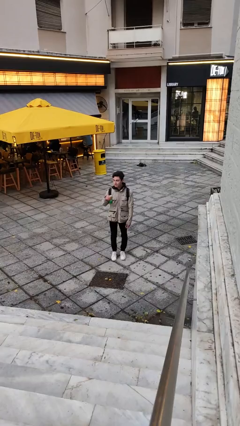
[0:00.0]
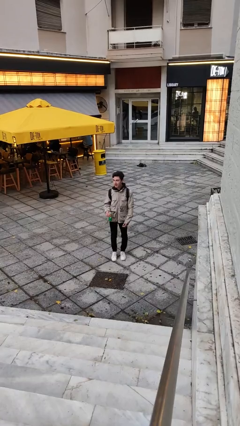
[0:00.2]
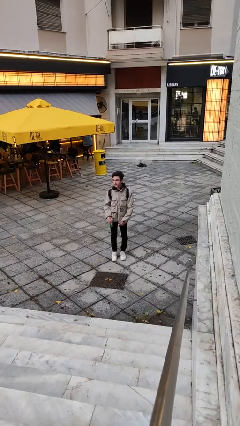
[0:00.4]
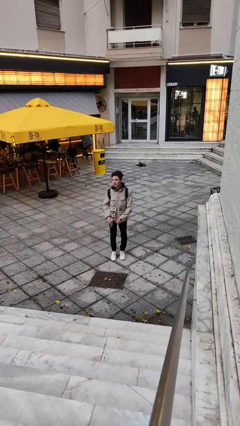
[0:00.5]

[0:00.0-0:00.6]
person drinks from beverage can

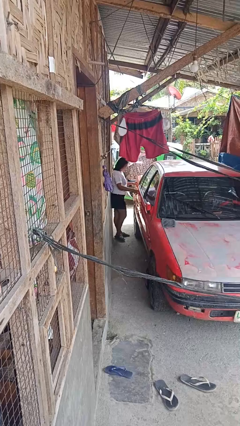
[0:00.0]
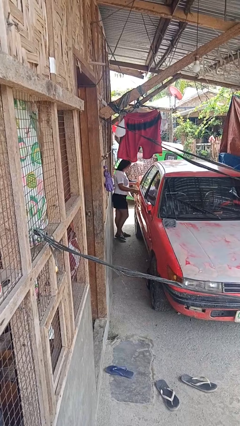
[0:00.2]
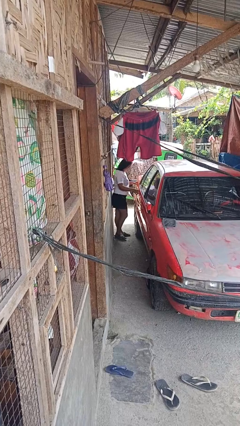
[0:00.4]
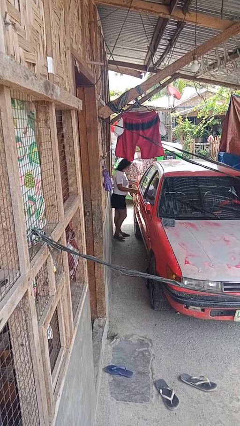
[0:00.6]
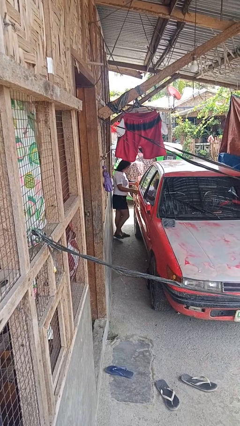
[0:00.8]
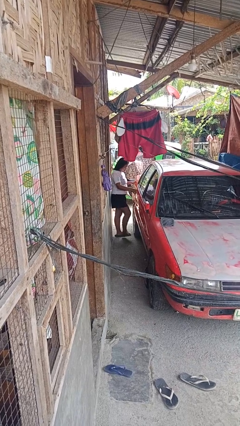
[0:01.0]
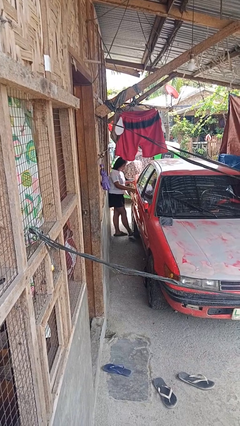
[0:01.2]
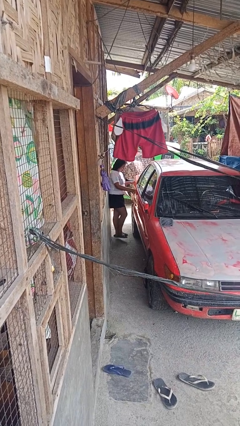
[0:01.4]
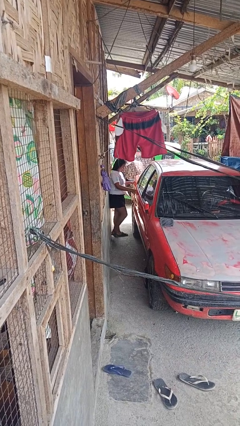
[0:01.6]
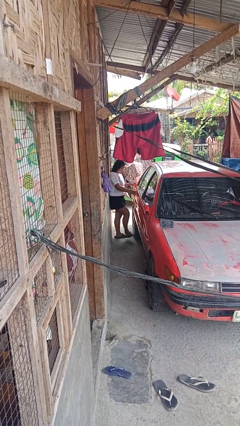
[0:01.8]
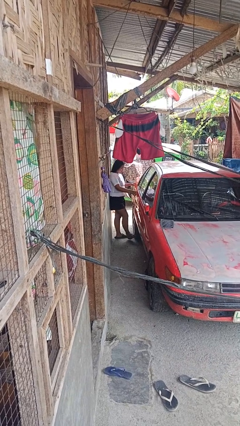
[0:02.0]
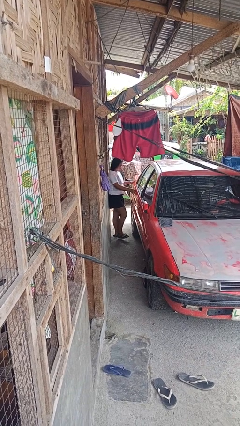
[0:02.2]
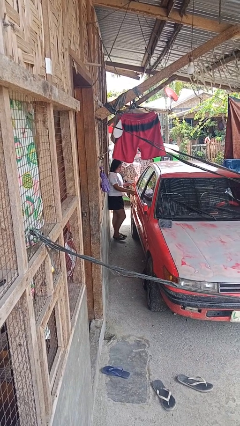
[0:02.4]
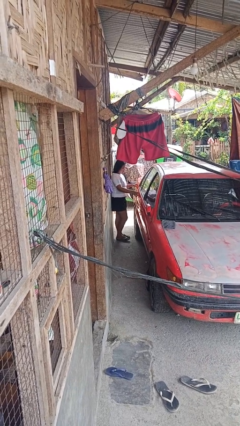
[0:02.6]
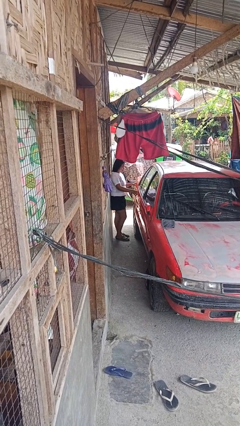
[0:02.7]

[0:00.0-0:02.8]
person kicks car tires

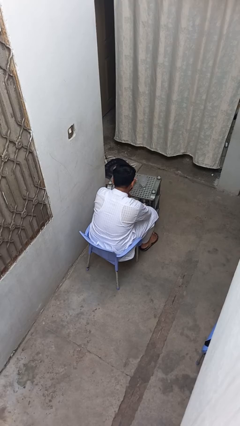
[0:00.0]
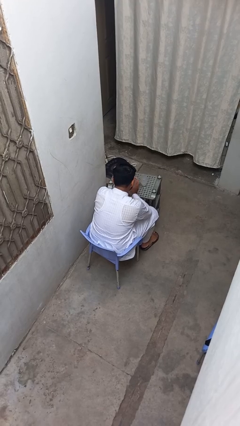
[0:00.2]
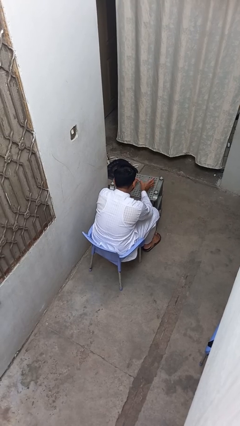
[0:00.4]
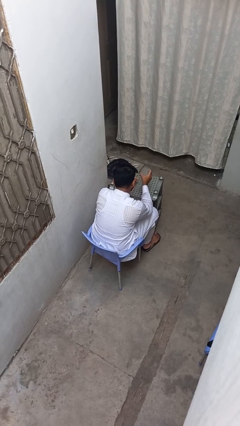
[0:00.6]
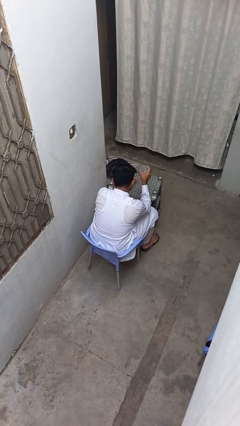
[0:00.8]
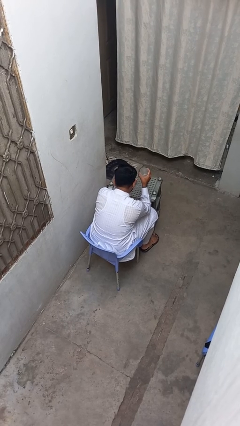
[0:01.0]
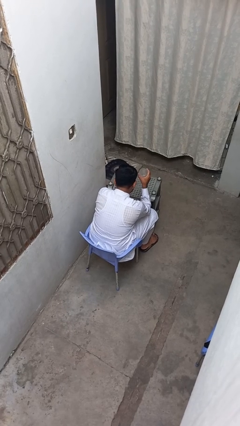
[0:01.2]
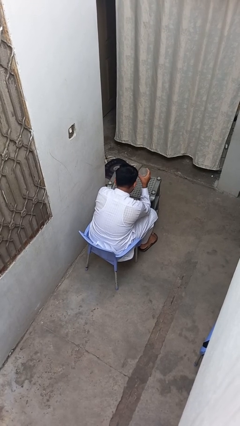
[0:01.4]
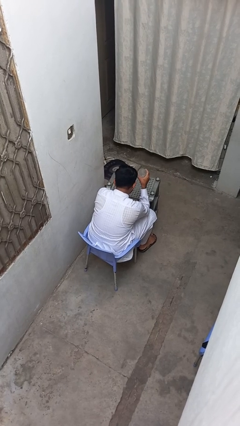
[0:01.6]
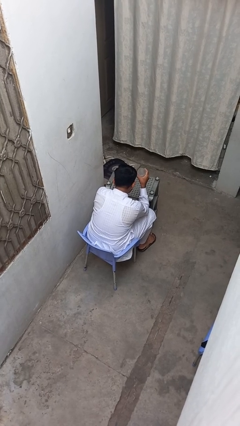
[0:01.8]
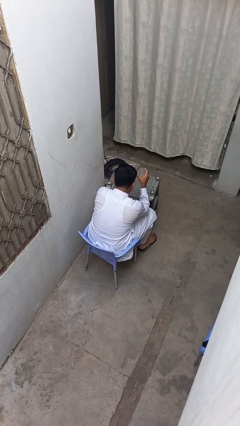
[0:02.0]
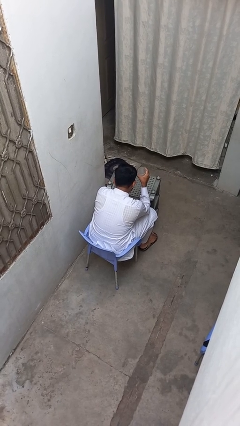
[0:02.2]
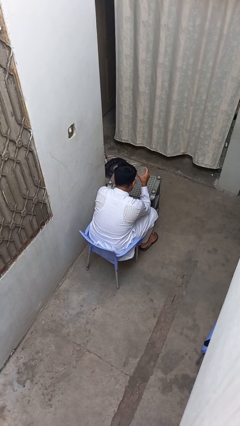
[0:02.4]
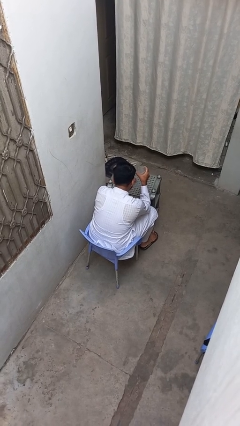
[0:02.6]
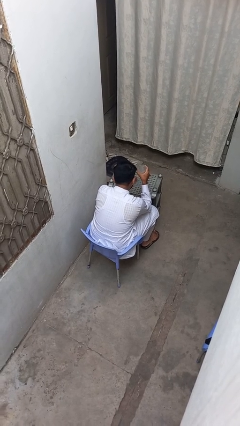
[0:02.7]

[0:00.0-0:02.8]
person picks up object from table

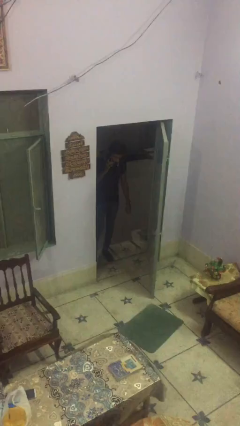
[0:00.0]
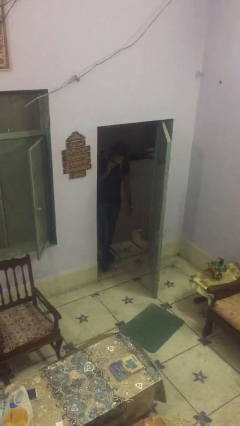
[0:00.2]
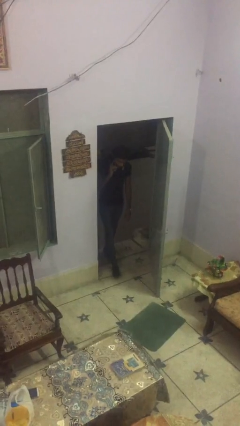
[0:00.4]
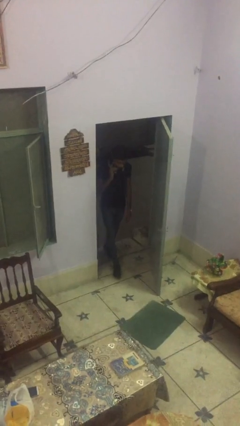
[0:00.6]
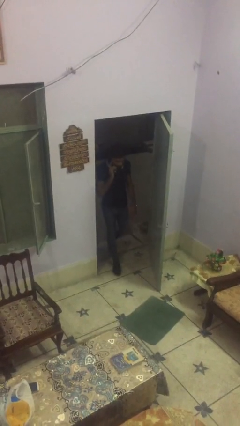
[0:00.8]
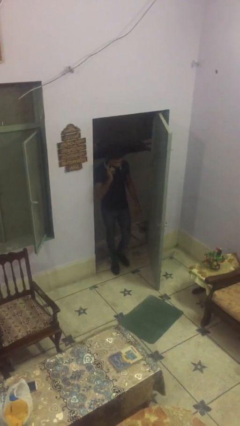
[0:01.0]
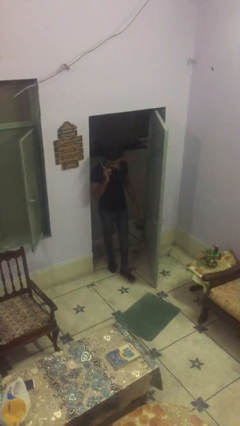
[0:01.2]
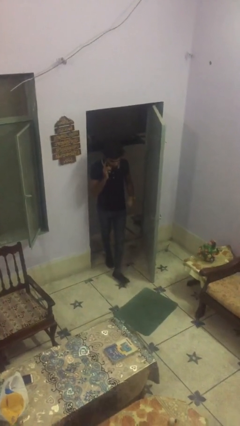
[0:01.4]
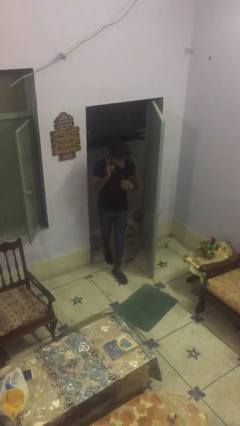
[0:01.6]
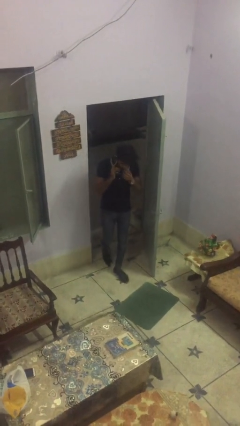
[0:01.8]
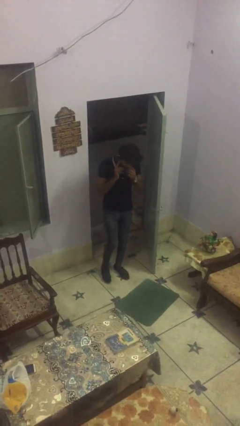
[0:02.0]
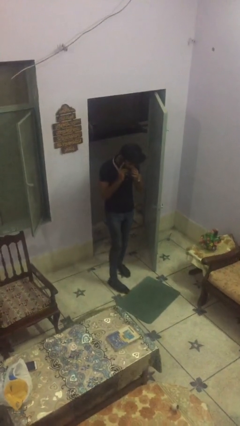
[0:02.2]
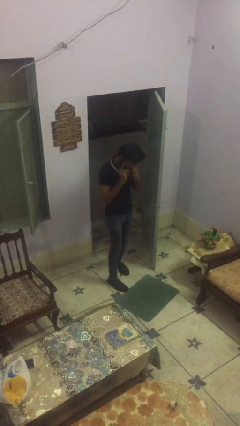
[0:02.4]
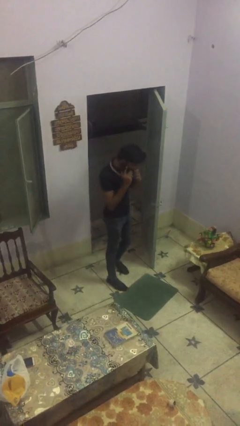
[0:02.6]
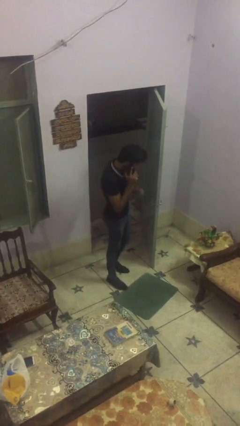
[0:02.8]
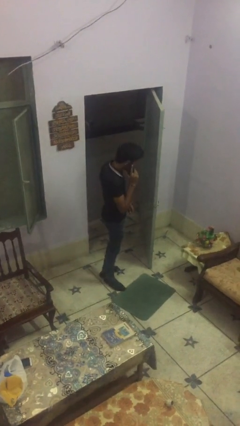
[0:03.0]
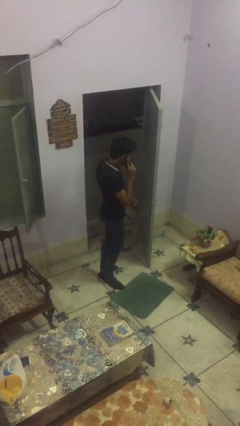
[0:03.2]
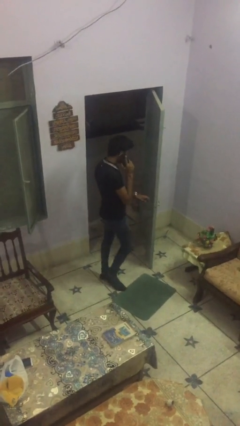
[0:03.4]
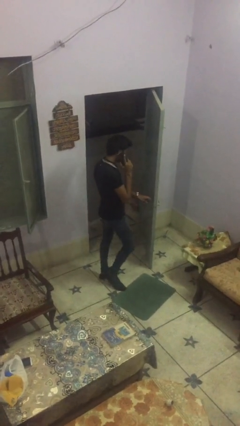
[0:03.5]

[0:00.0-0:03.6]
person enters scene through structure

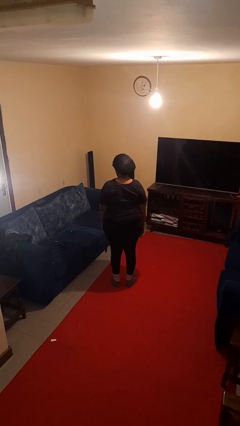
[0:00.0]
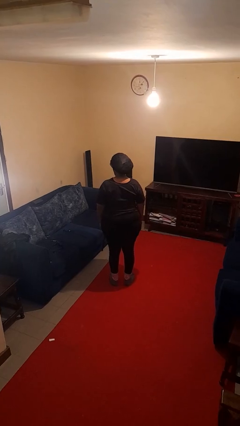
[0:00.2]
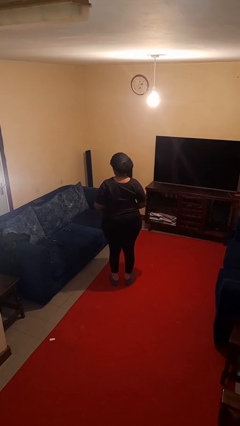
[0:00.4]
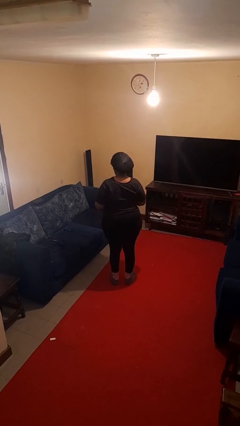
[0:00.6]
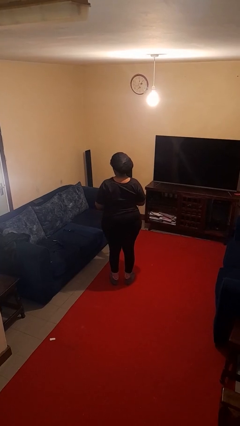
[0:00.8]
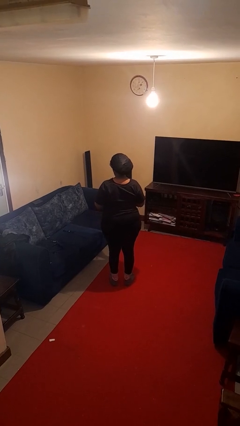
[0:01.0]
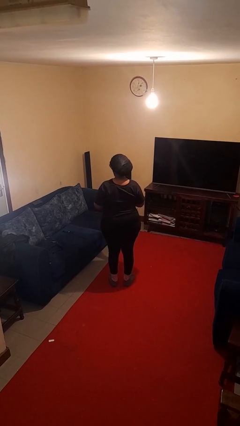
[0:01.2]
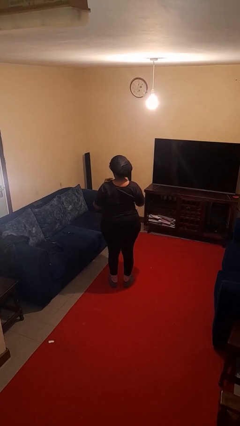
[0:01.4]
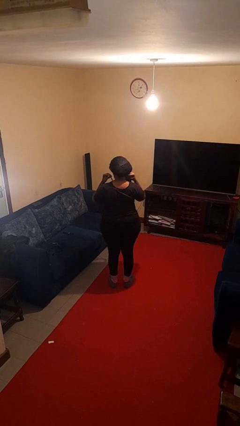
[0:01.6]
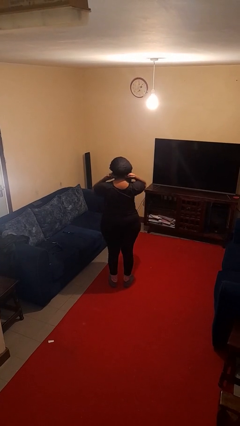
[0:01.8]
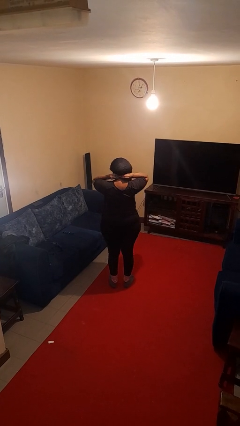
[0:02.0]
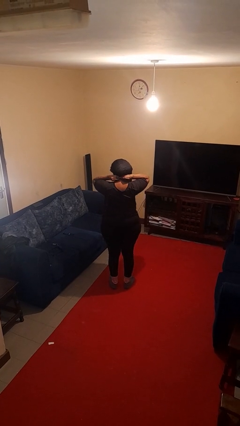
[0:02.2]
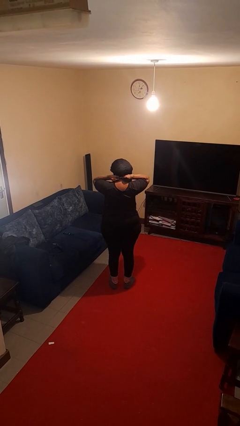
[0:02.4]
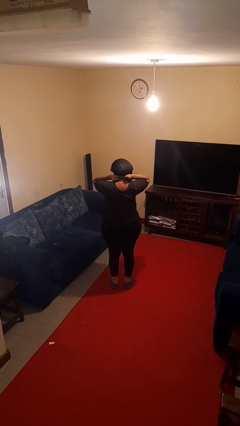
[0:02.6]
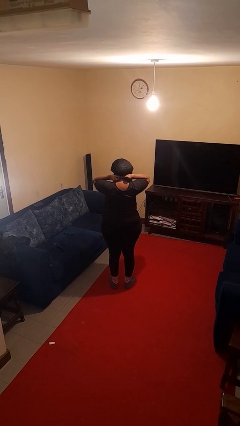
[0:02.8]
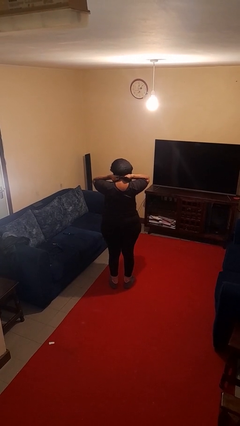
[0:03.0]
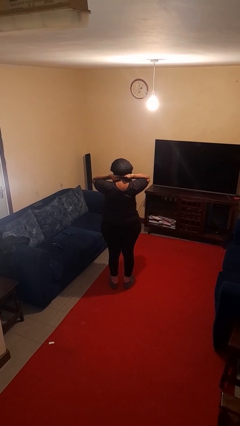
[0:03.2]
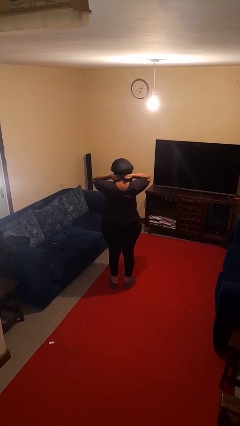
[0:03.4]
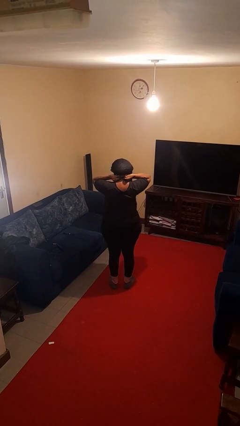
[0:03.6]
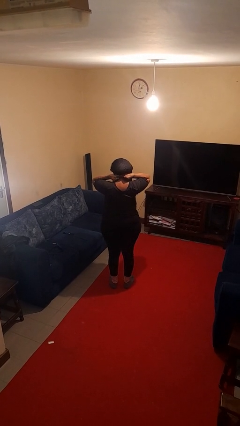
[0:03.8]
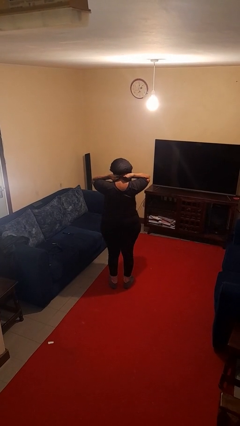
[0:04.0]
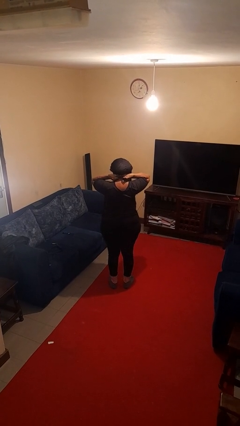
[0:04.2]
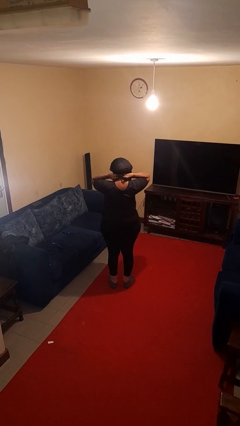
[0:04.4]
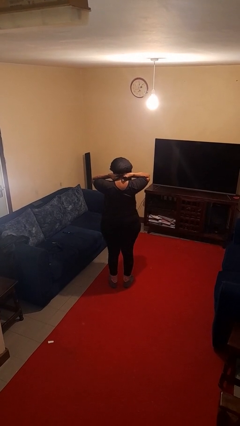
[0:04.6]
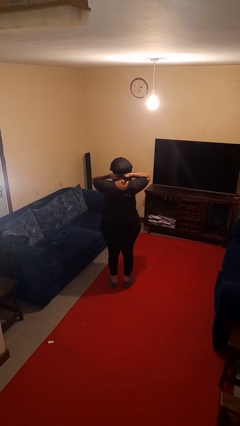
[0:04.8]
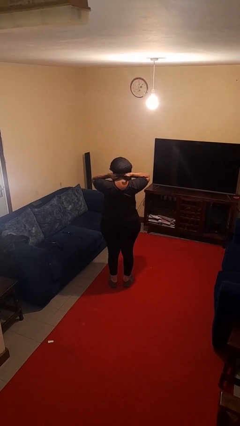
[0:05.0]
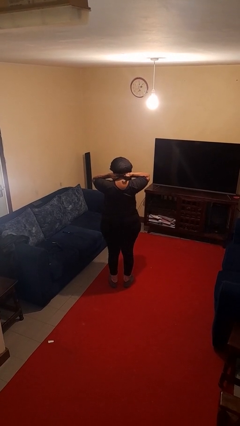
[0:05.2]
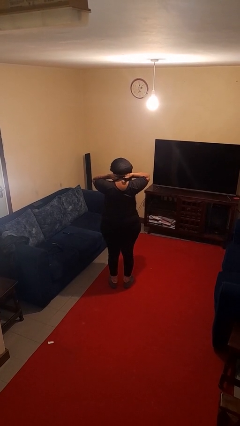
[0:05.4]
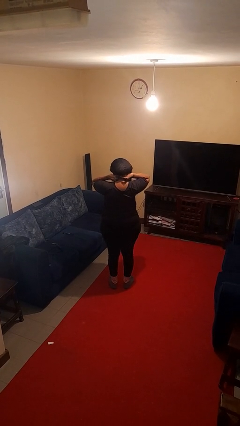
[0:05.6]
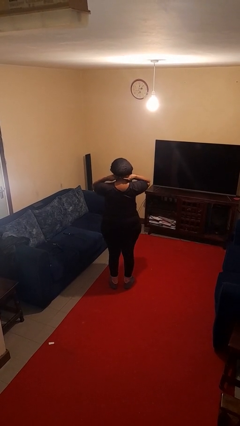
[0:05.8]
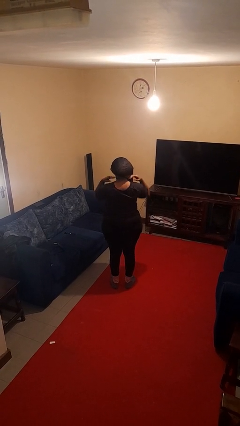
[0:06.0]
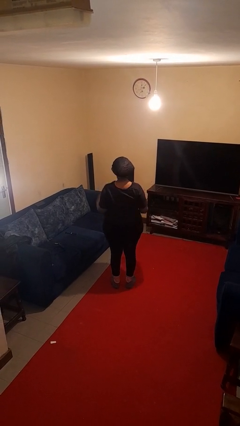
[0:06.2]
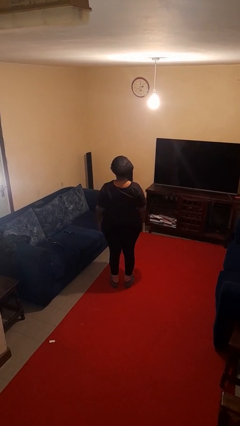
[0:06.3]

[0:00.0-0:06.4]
person puts on necklace

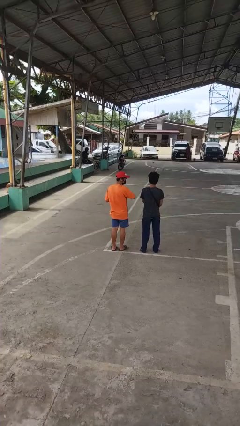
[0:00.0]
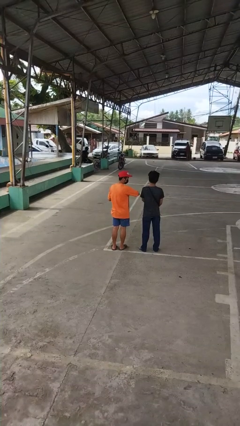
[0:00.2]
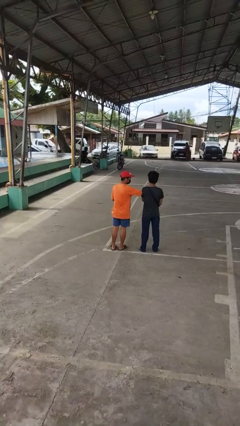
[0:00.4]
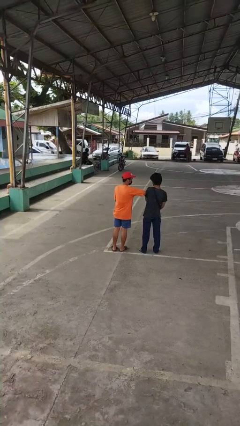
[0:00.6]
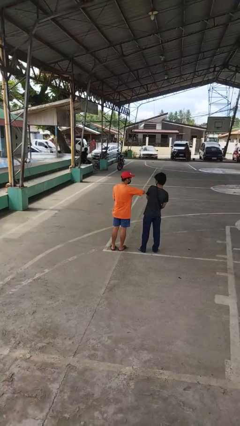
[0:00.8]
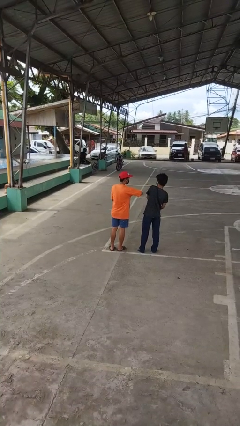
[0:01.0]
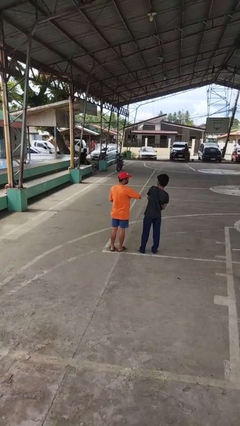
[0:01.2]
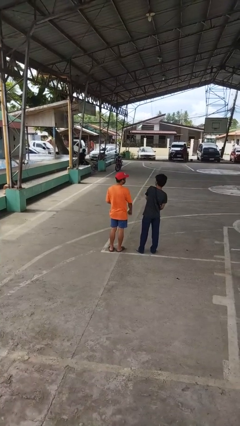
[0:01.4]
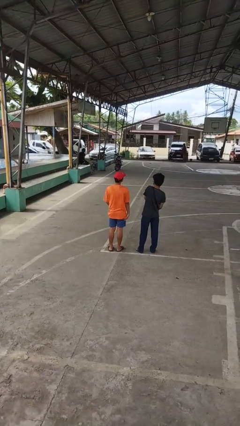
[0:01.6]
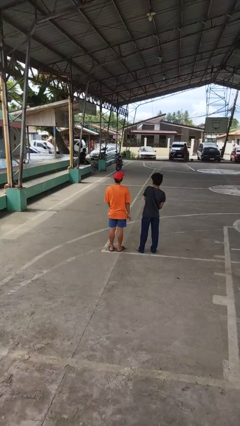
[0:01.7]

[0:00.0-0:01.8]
person nudges person with elbow
